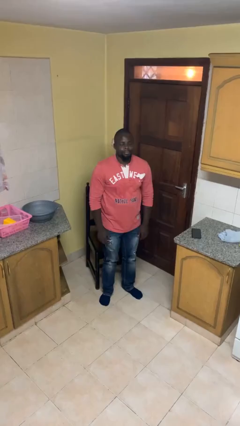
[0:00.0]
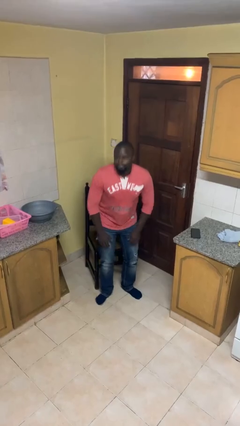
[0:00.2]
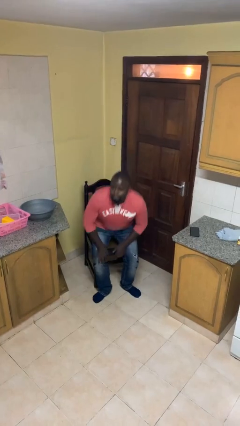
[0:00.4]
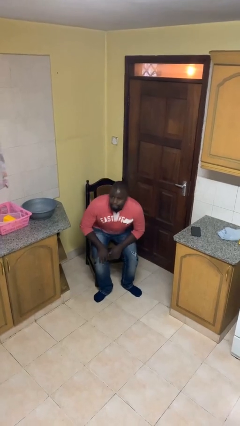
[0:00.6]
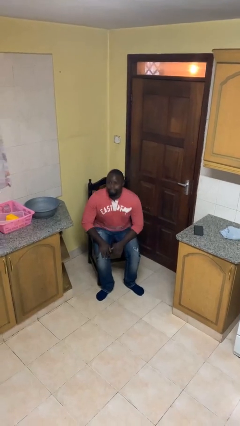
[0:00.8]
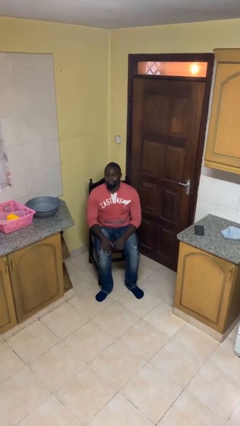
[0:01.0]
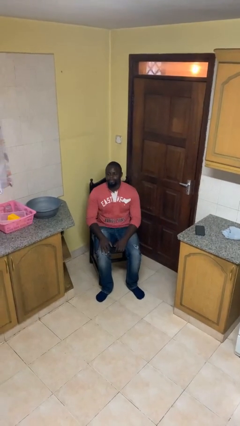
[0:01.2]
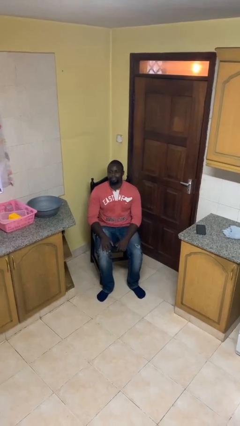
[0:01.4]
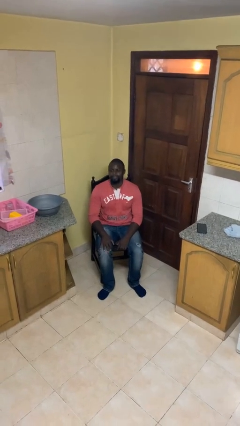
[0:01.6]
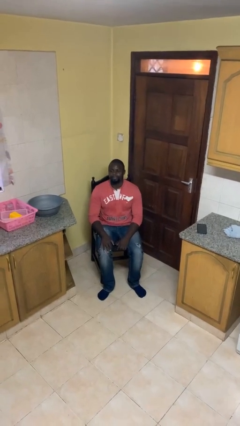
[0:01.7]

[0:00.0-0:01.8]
person sits down

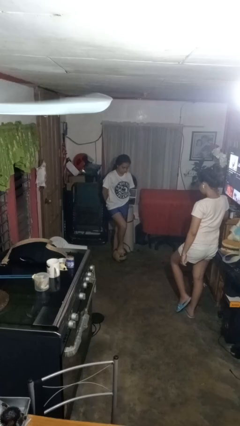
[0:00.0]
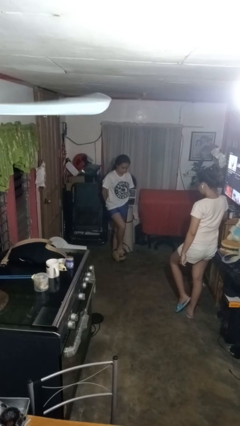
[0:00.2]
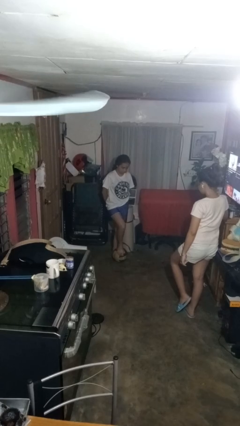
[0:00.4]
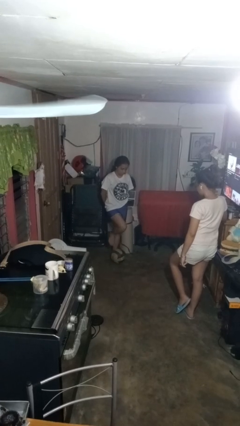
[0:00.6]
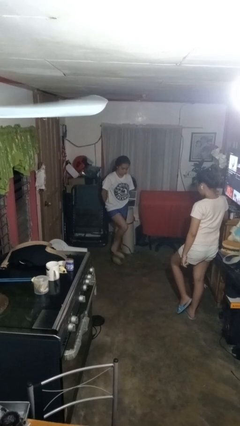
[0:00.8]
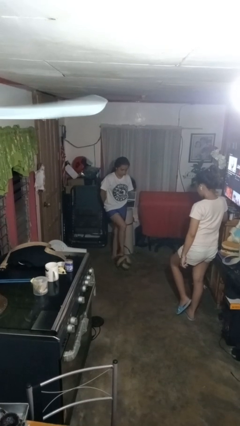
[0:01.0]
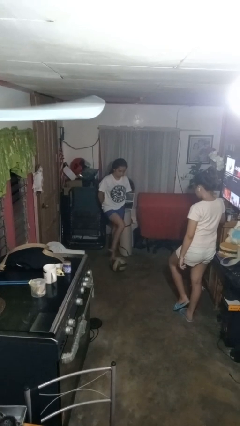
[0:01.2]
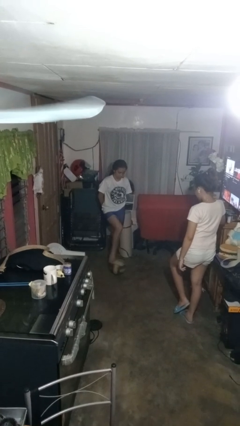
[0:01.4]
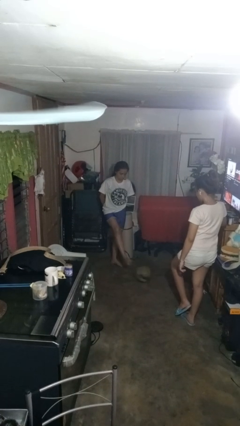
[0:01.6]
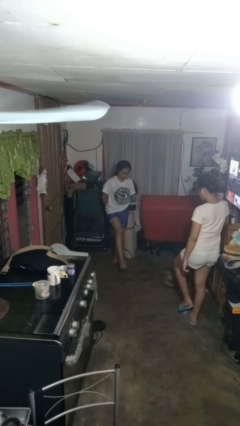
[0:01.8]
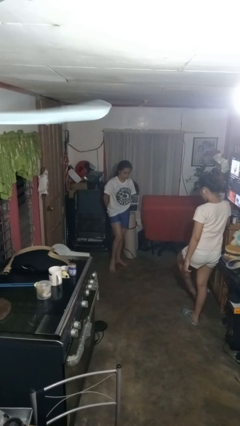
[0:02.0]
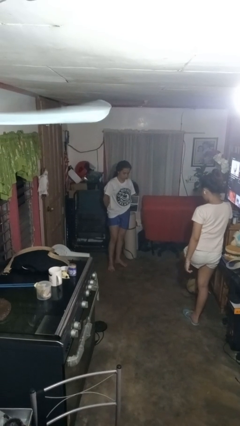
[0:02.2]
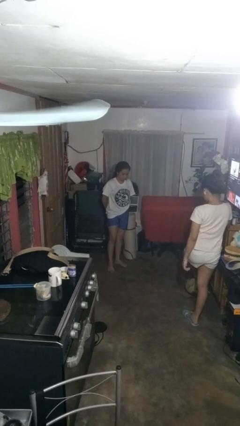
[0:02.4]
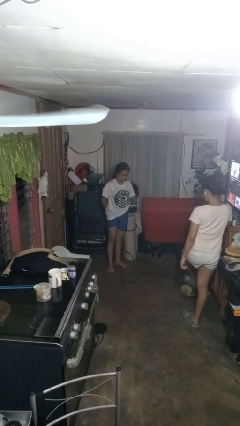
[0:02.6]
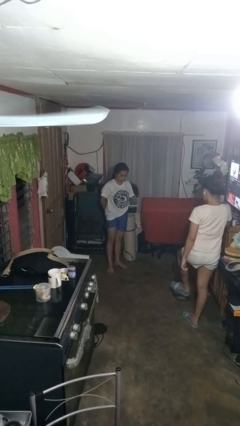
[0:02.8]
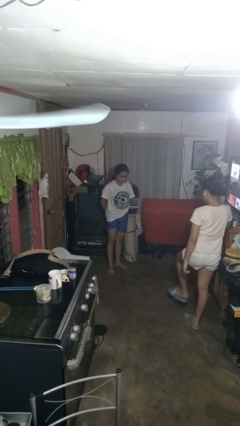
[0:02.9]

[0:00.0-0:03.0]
person kicks object to person

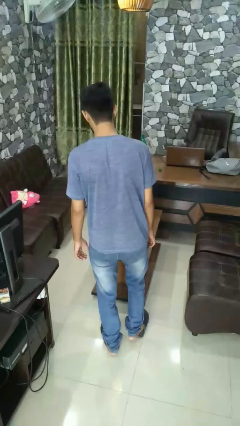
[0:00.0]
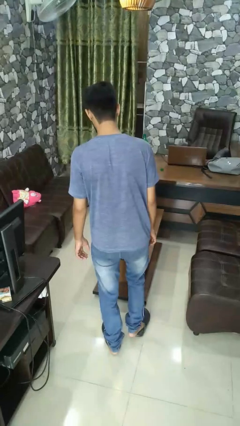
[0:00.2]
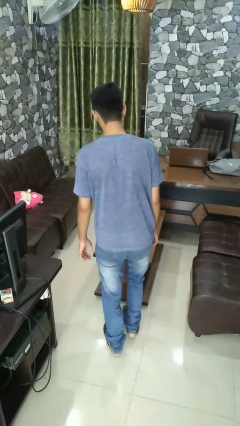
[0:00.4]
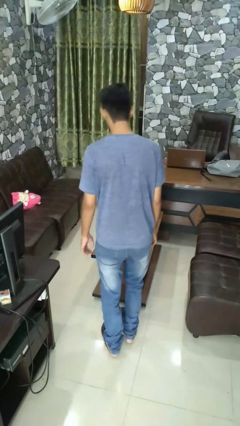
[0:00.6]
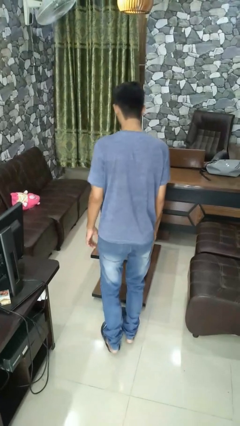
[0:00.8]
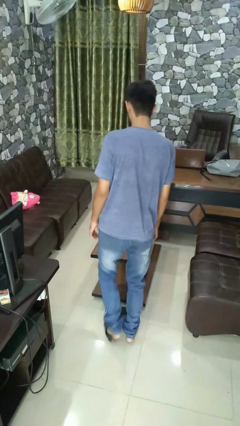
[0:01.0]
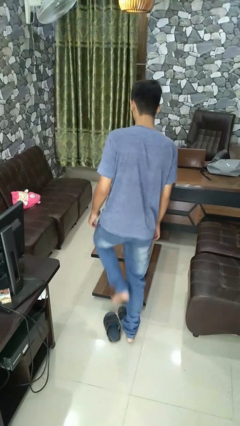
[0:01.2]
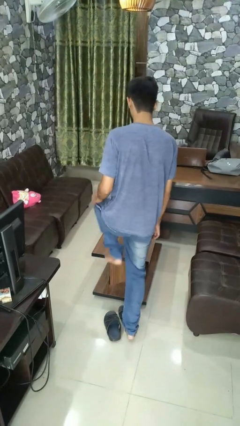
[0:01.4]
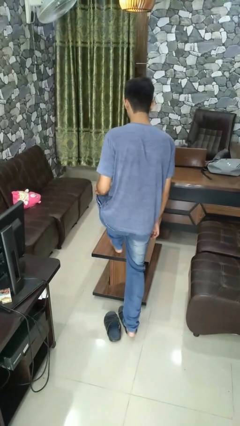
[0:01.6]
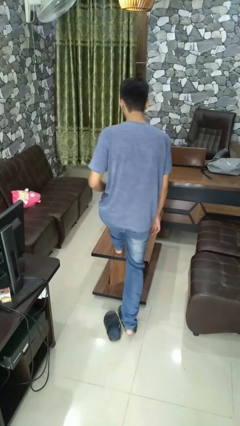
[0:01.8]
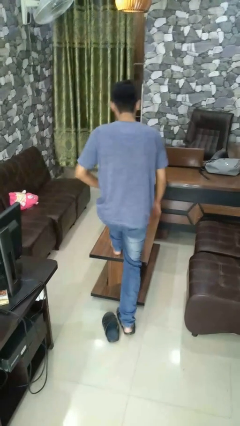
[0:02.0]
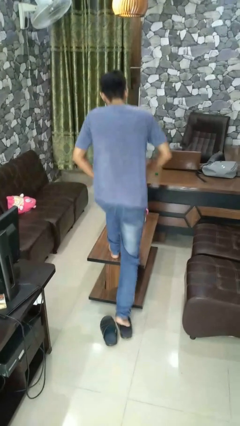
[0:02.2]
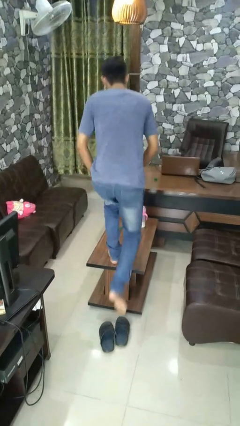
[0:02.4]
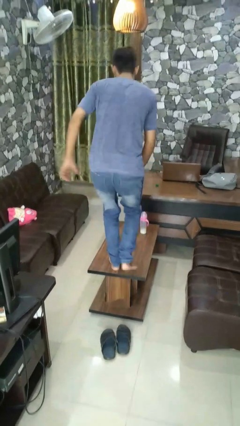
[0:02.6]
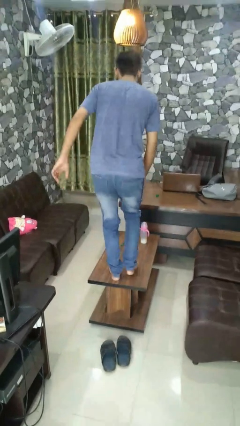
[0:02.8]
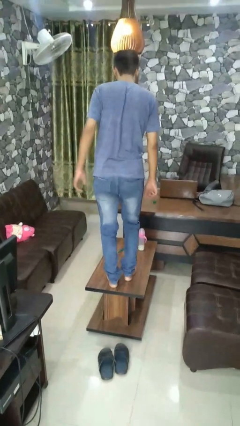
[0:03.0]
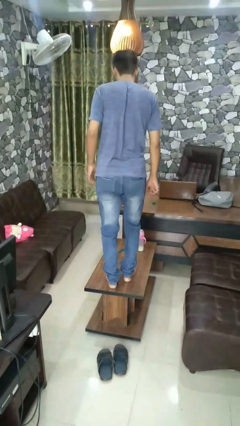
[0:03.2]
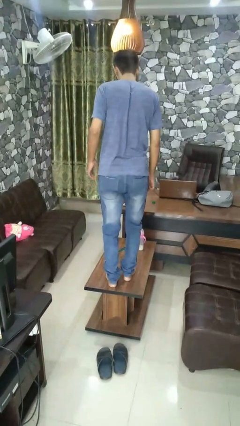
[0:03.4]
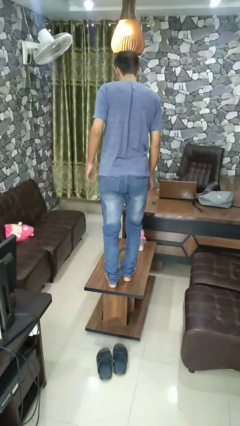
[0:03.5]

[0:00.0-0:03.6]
person climbs on table

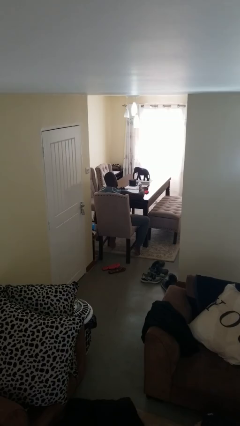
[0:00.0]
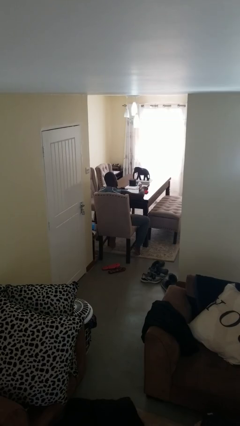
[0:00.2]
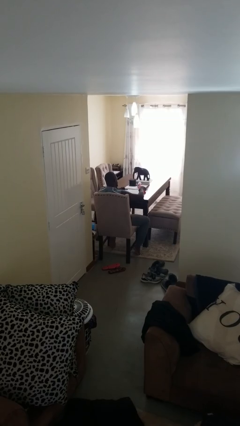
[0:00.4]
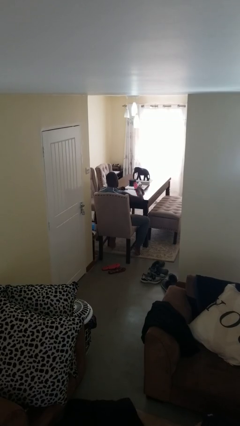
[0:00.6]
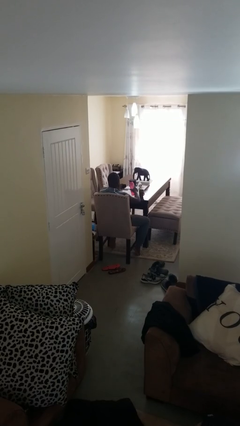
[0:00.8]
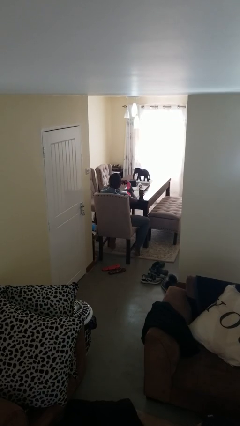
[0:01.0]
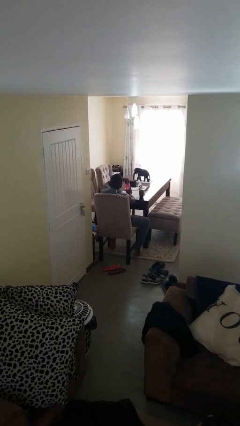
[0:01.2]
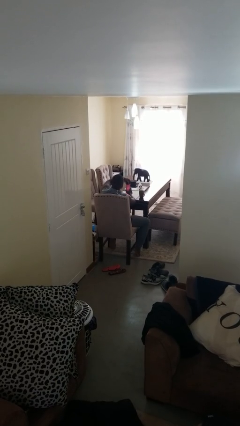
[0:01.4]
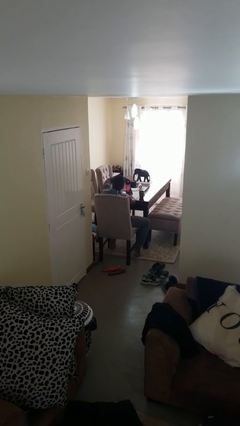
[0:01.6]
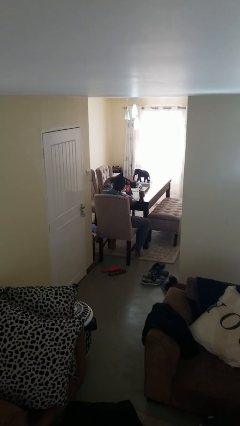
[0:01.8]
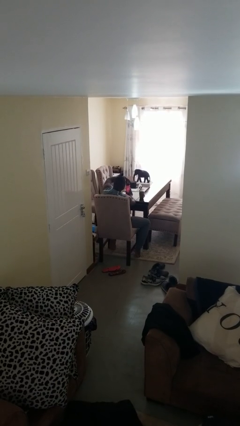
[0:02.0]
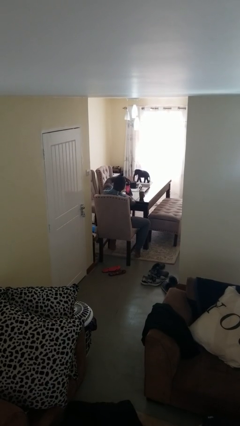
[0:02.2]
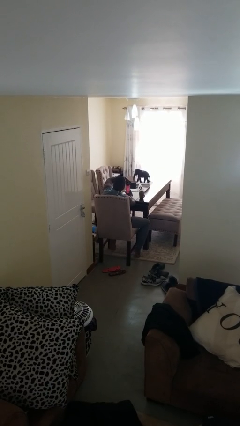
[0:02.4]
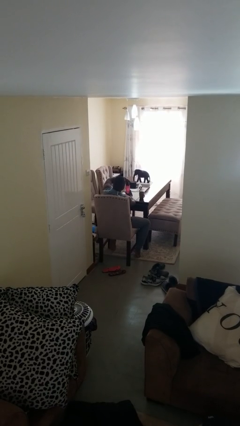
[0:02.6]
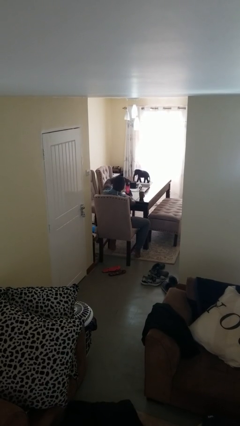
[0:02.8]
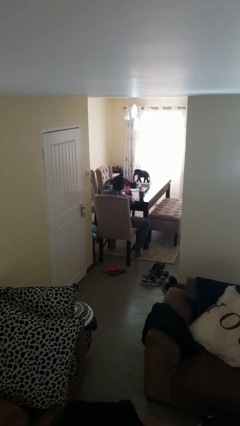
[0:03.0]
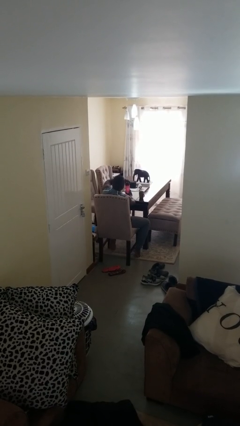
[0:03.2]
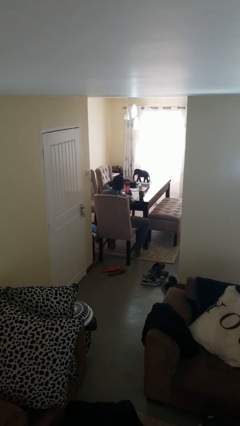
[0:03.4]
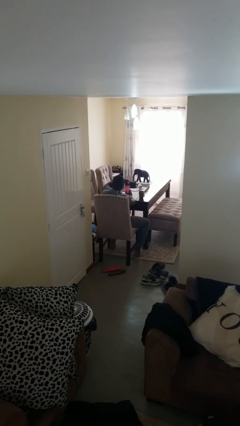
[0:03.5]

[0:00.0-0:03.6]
person screws lid to bottle

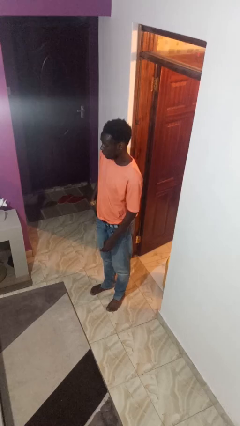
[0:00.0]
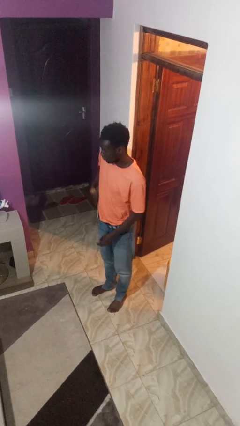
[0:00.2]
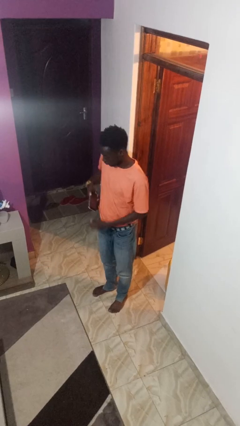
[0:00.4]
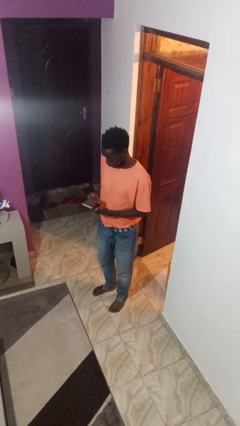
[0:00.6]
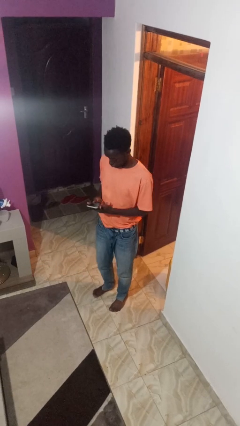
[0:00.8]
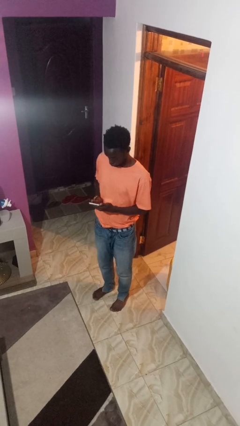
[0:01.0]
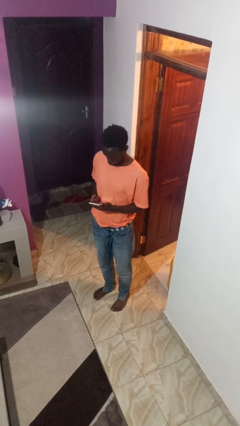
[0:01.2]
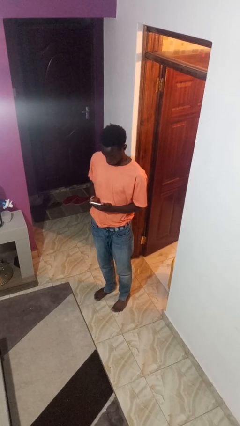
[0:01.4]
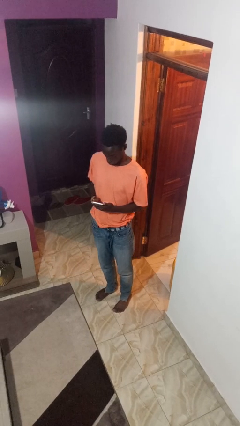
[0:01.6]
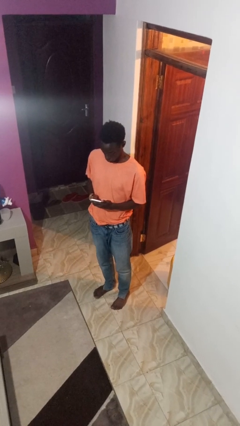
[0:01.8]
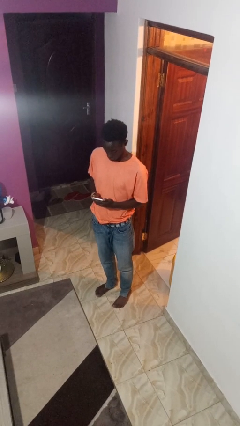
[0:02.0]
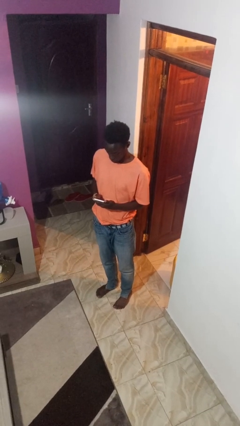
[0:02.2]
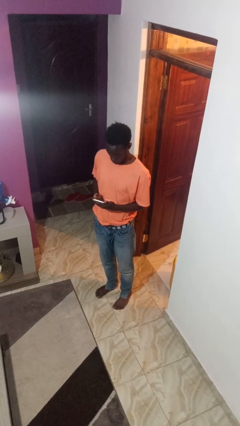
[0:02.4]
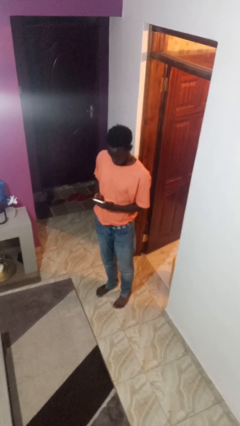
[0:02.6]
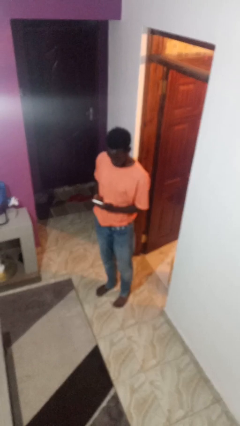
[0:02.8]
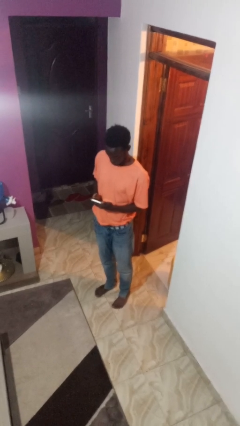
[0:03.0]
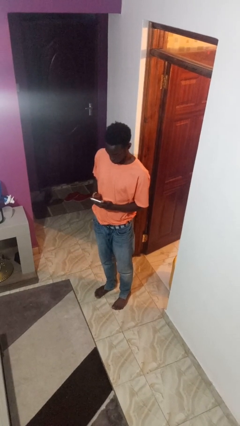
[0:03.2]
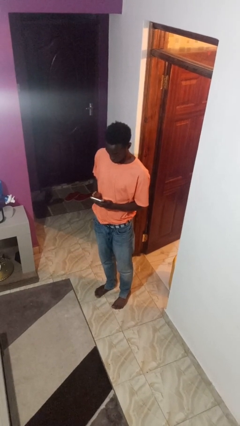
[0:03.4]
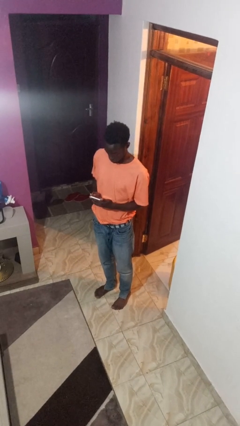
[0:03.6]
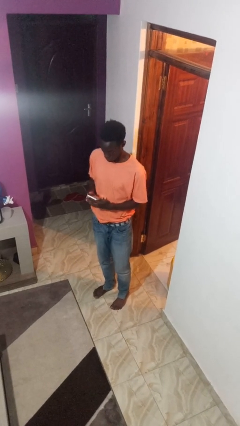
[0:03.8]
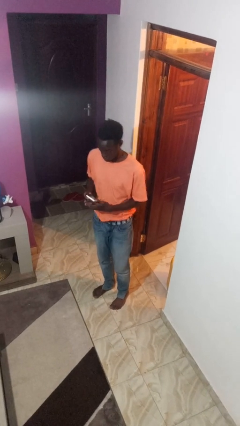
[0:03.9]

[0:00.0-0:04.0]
person takes phone from pocket

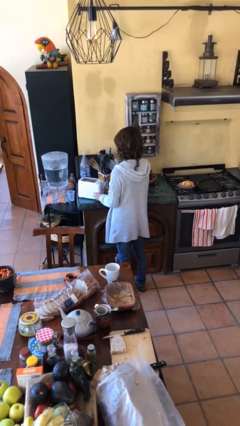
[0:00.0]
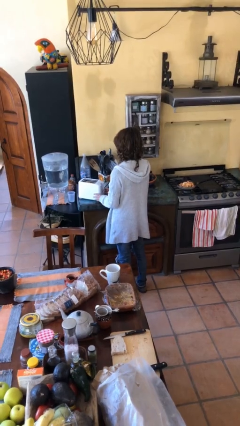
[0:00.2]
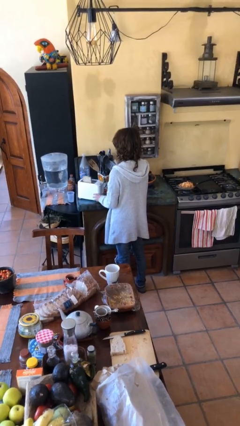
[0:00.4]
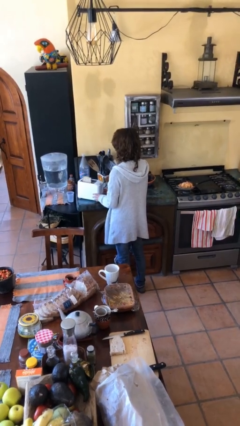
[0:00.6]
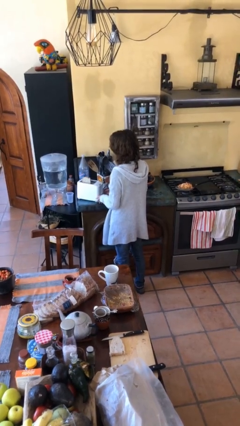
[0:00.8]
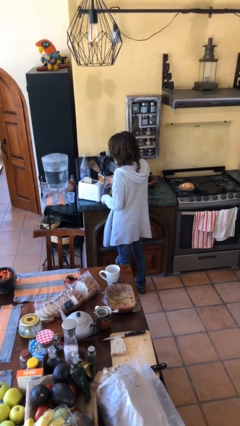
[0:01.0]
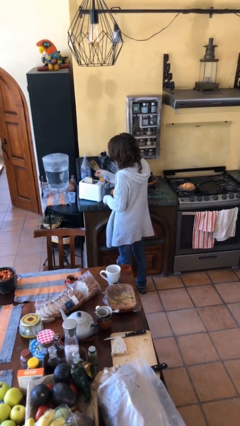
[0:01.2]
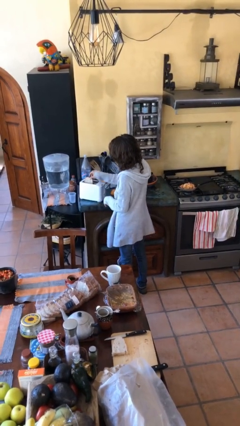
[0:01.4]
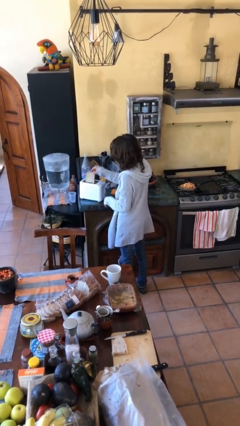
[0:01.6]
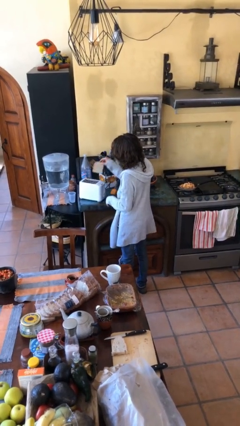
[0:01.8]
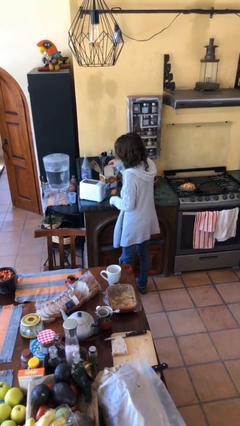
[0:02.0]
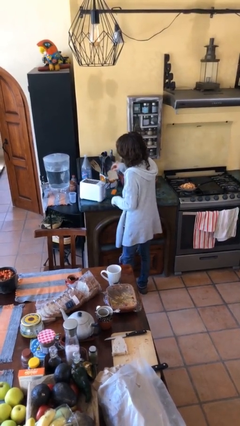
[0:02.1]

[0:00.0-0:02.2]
person takes object from toaster
